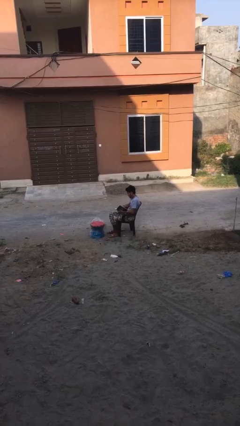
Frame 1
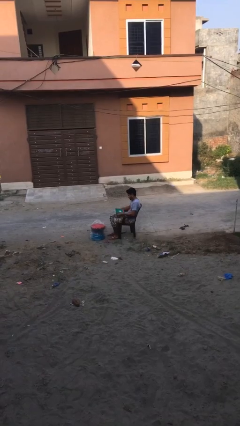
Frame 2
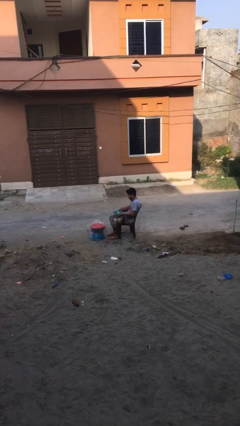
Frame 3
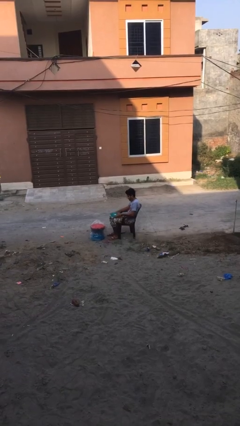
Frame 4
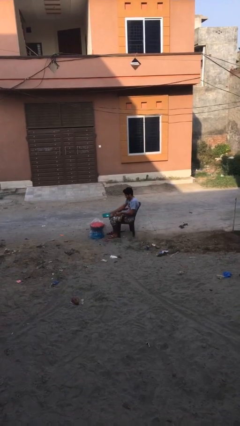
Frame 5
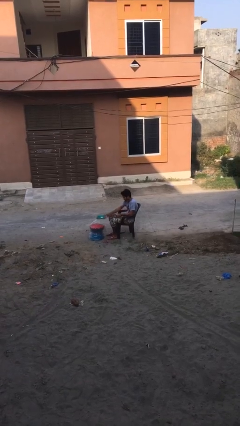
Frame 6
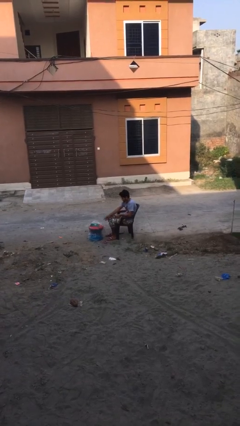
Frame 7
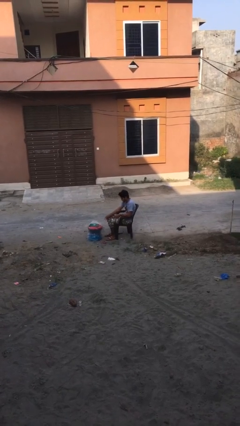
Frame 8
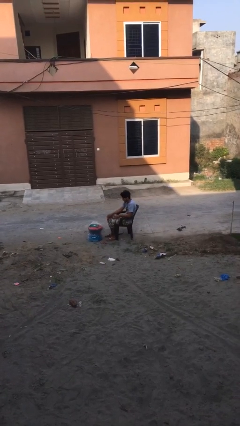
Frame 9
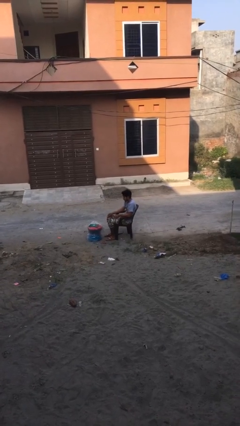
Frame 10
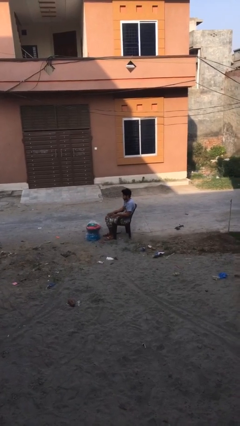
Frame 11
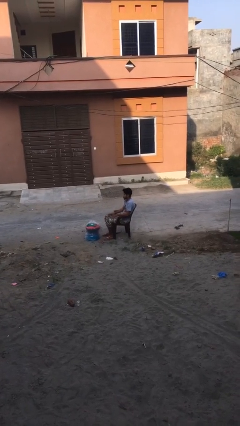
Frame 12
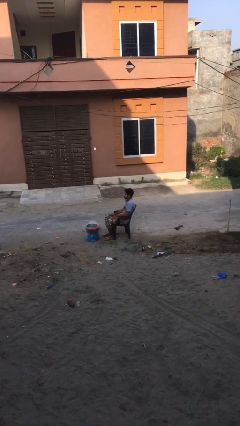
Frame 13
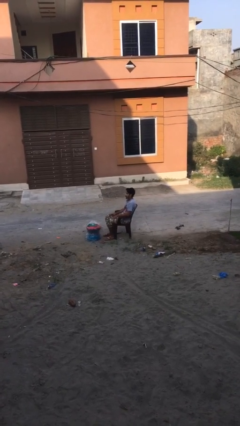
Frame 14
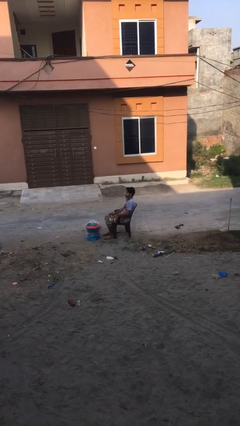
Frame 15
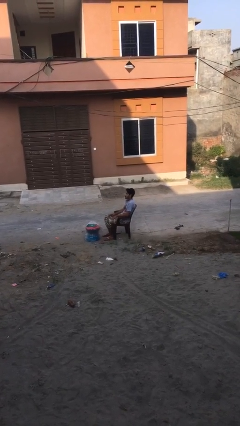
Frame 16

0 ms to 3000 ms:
person puts down object on table

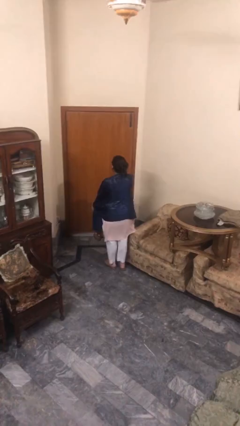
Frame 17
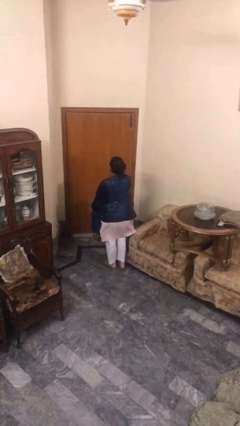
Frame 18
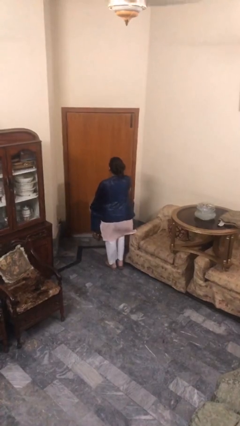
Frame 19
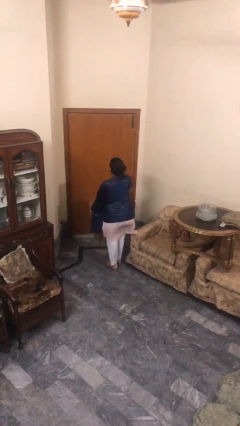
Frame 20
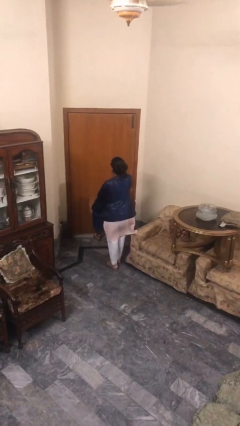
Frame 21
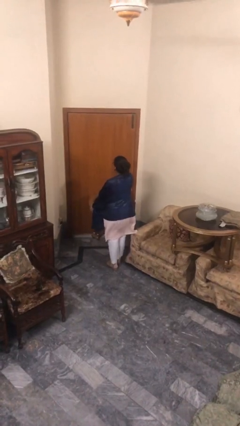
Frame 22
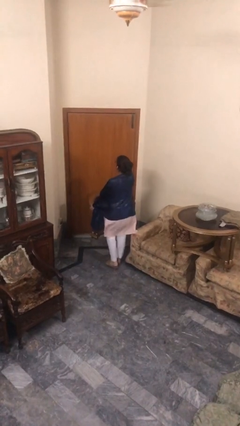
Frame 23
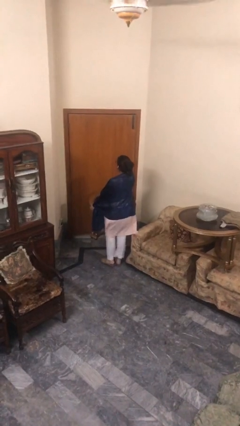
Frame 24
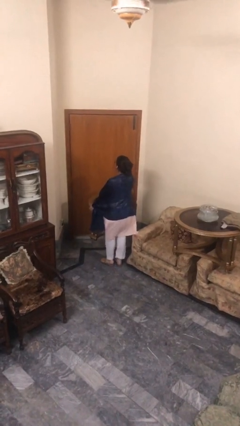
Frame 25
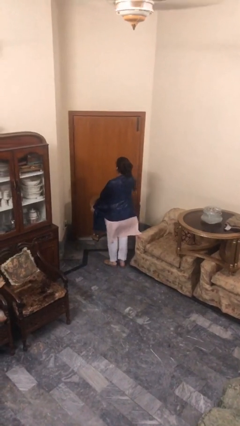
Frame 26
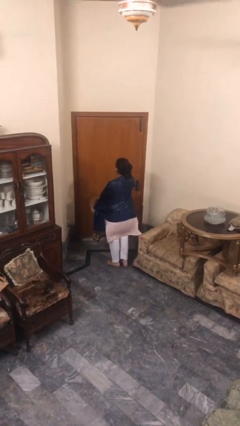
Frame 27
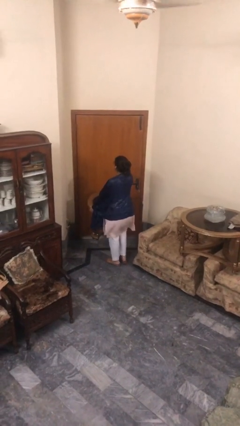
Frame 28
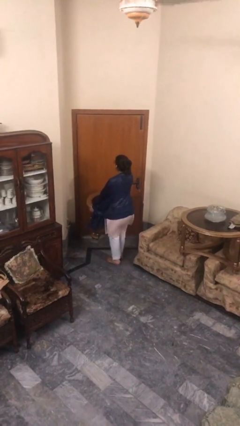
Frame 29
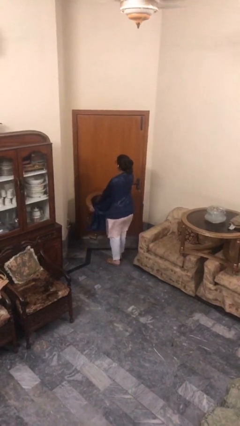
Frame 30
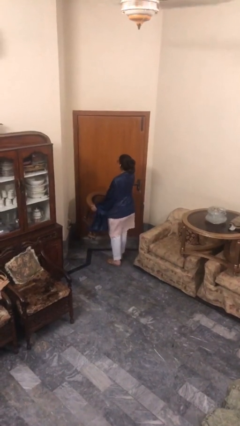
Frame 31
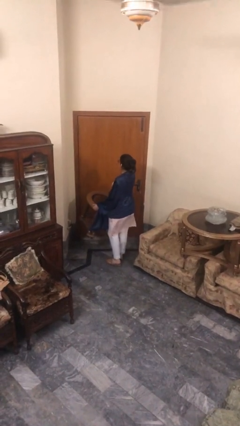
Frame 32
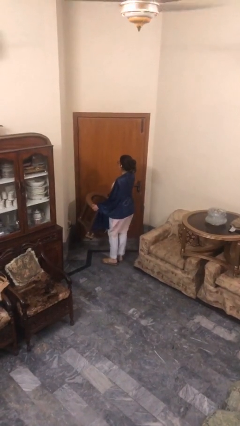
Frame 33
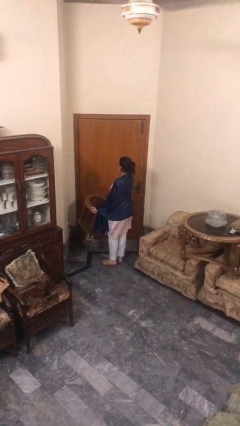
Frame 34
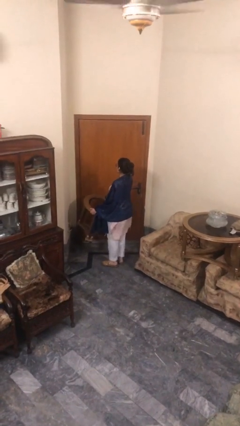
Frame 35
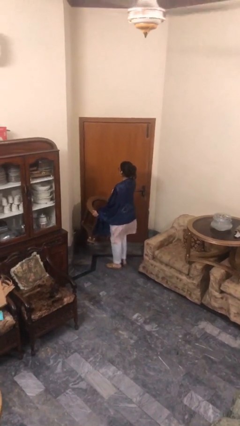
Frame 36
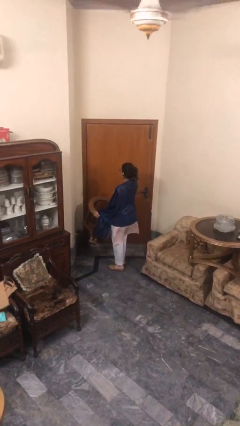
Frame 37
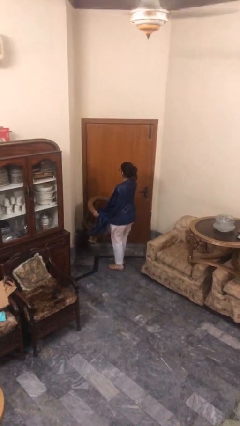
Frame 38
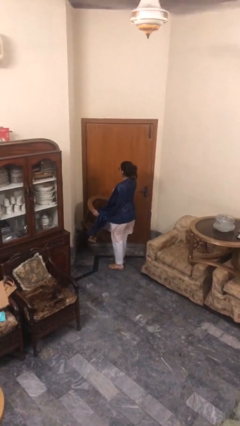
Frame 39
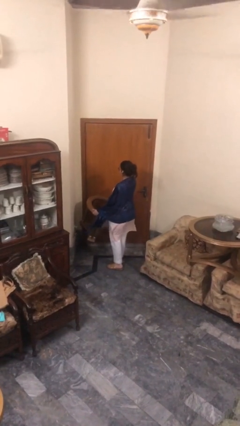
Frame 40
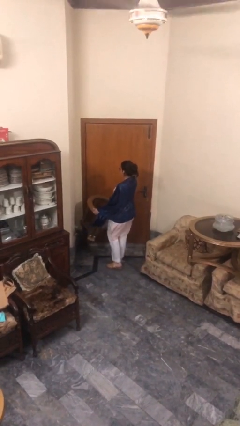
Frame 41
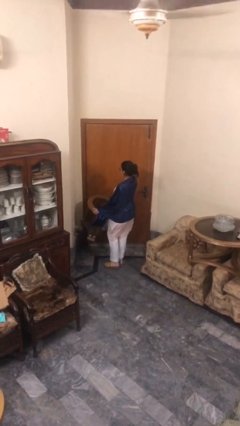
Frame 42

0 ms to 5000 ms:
person carries furniture

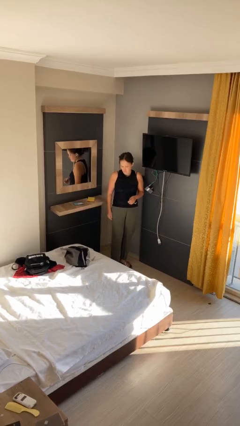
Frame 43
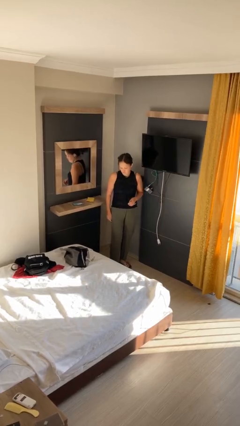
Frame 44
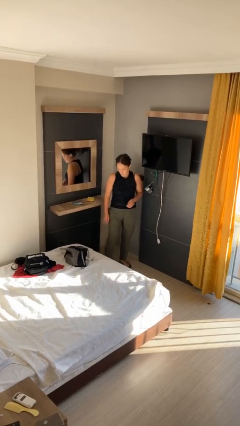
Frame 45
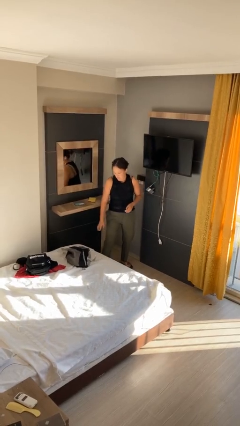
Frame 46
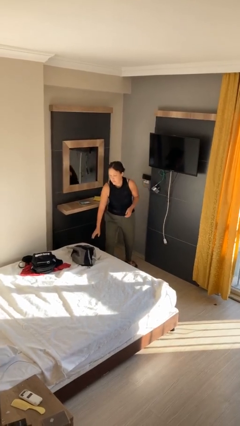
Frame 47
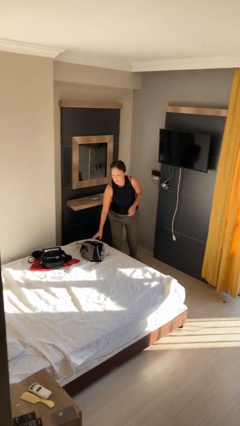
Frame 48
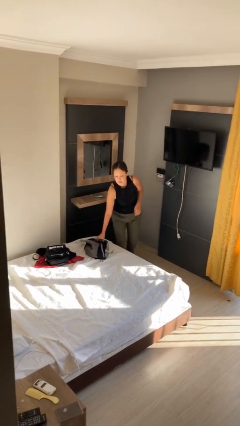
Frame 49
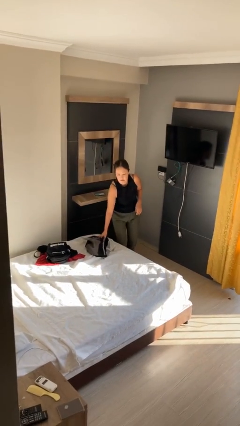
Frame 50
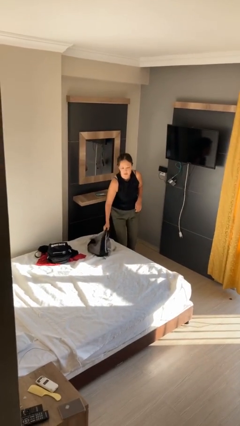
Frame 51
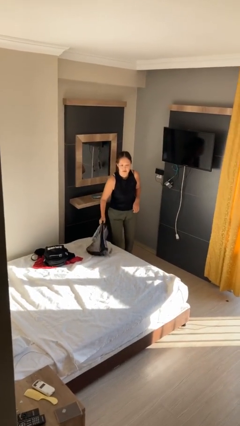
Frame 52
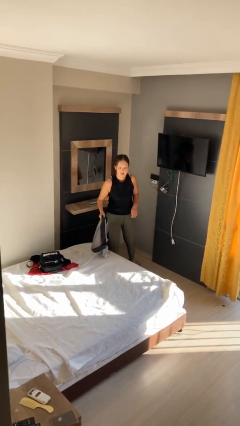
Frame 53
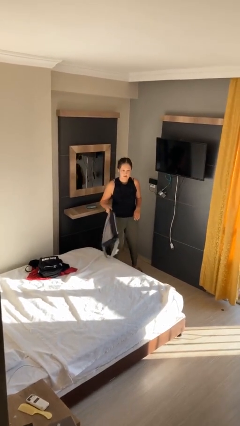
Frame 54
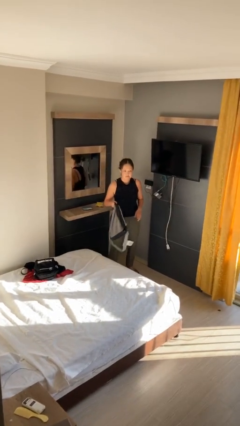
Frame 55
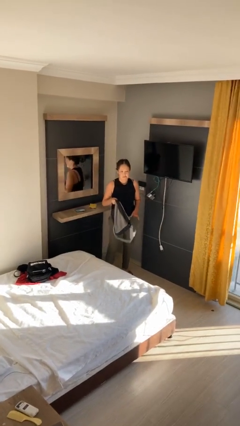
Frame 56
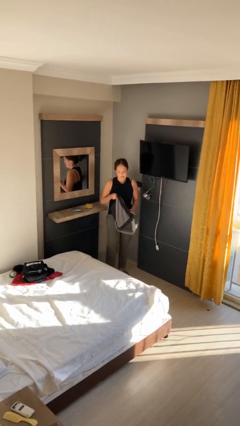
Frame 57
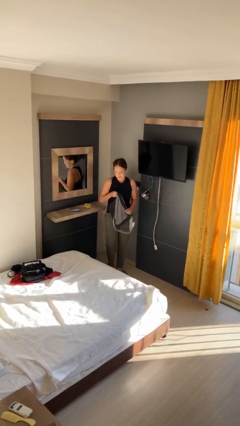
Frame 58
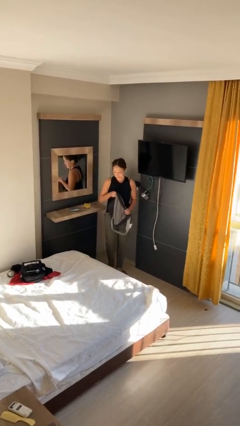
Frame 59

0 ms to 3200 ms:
person picks up object from bed

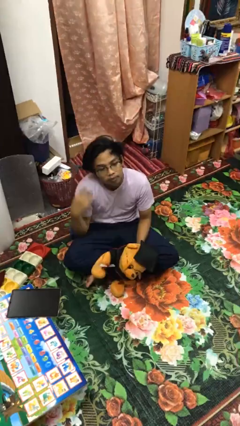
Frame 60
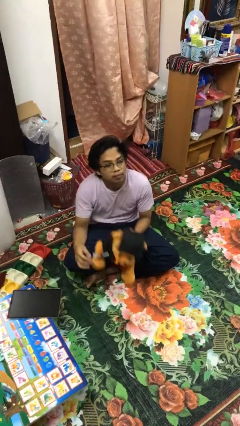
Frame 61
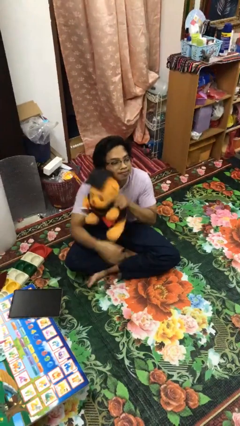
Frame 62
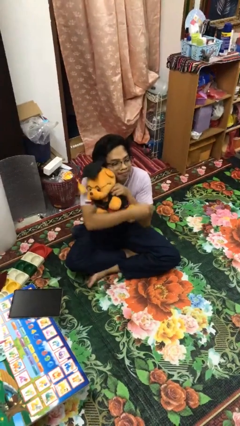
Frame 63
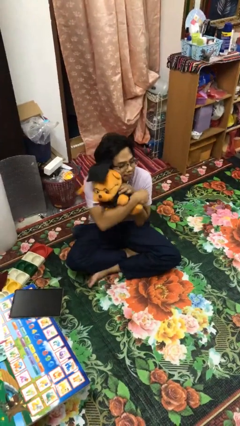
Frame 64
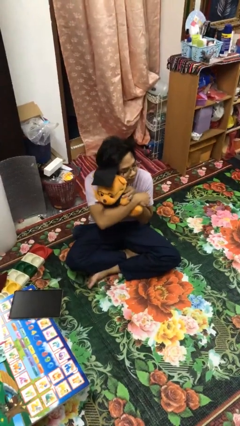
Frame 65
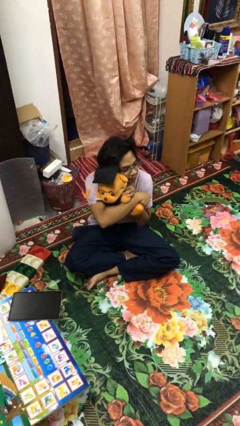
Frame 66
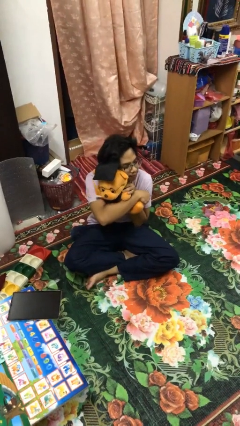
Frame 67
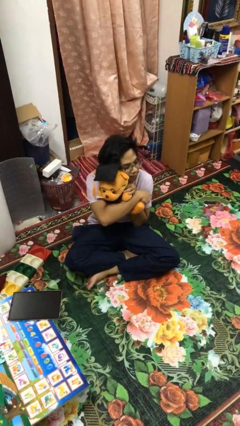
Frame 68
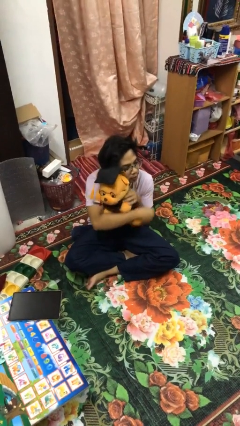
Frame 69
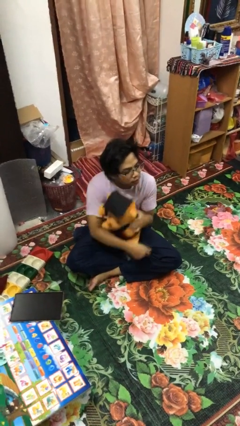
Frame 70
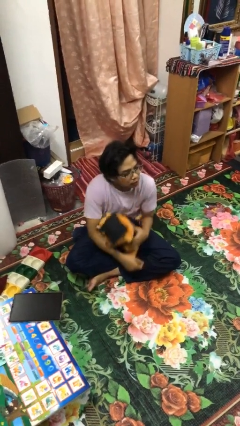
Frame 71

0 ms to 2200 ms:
person hugs stuffed animal

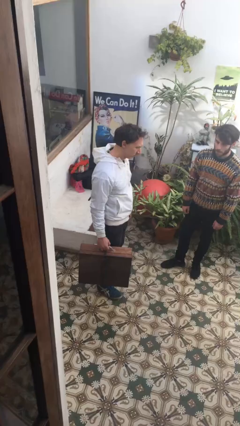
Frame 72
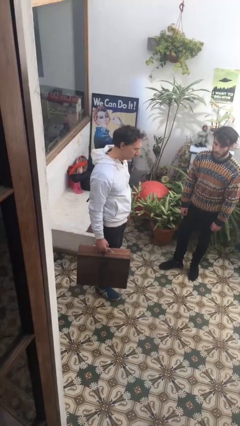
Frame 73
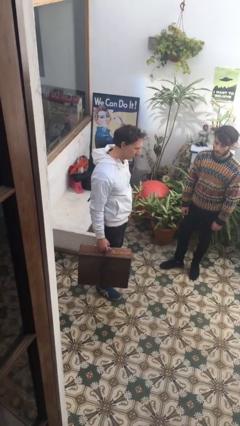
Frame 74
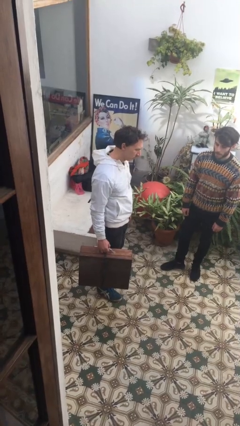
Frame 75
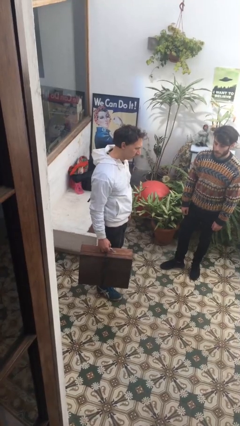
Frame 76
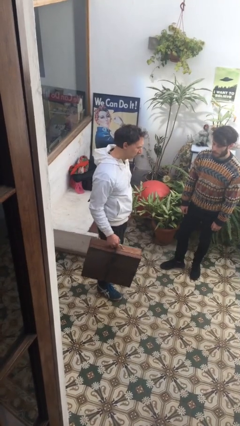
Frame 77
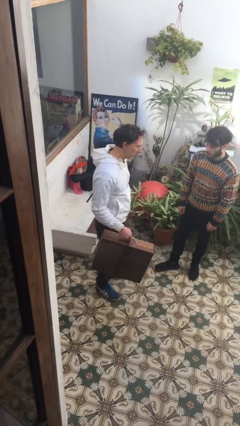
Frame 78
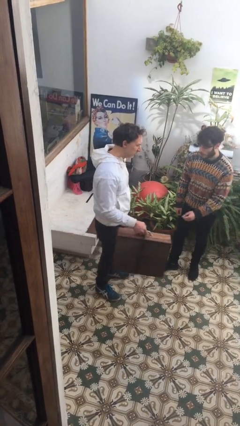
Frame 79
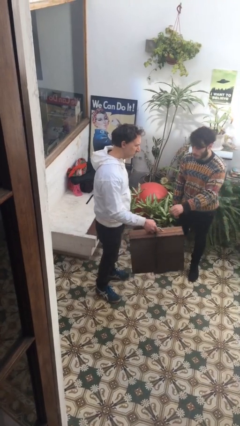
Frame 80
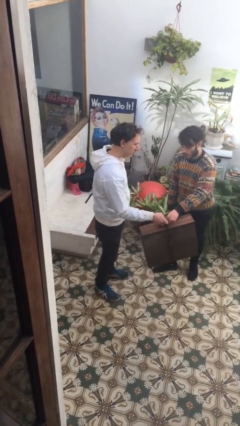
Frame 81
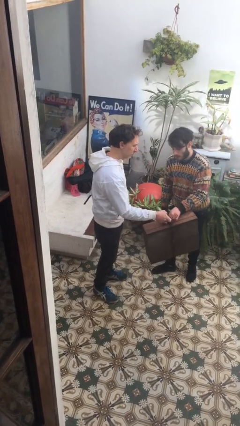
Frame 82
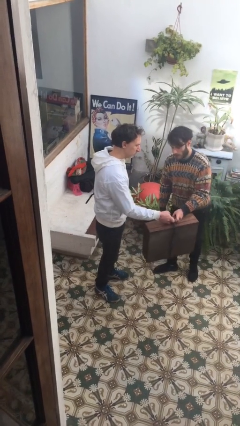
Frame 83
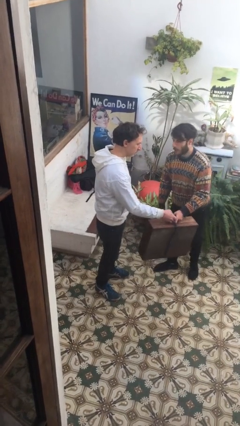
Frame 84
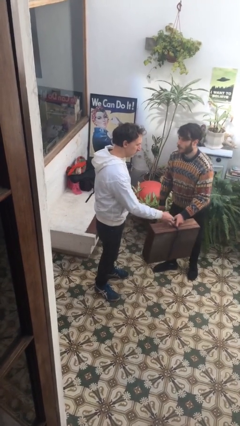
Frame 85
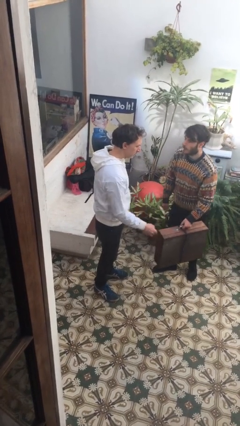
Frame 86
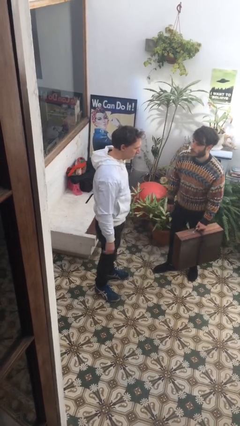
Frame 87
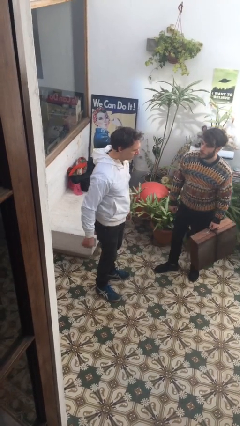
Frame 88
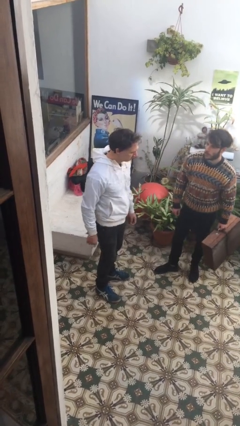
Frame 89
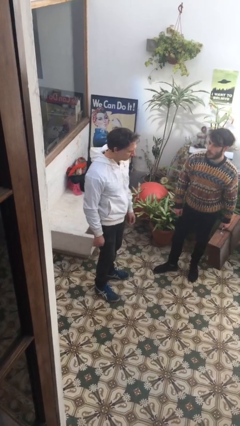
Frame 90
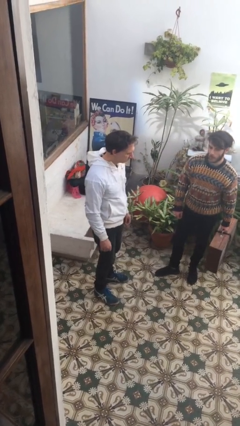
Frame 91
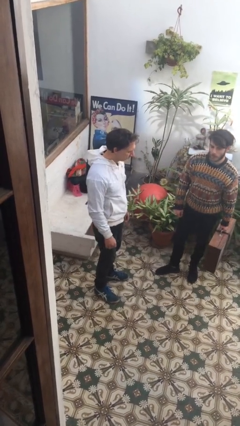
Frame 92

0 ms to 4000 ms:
person transfers object to person

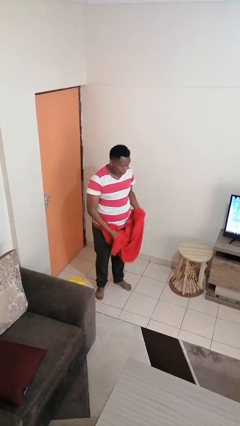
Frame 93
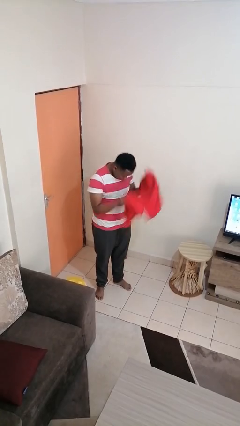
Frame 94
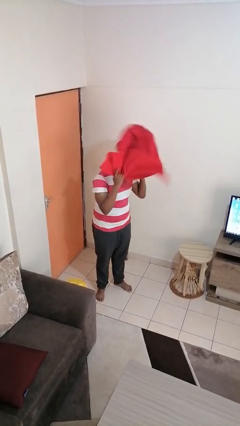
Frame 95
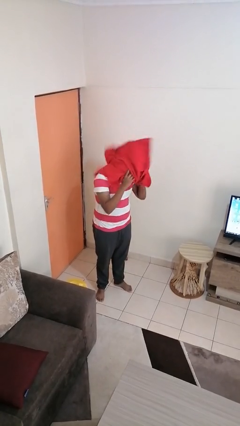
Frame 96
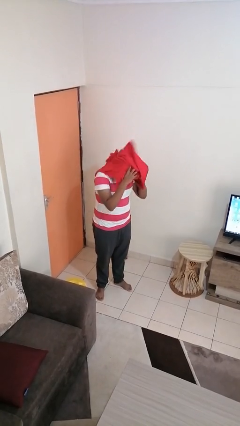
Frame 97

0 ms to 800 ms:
person dries hair with towel
